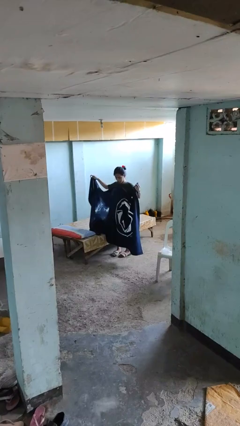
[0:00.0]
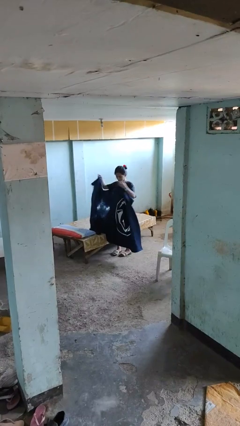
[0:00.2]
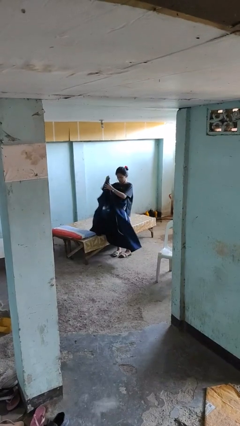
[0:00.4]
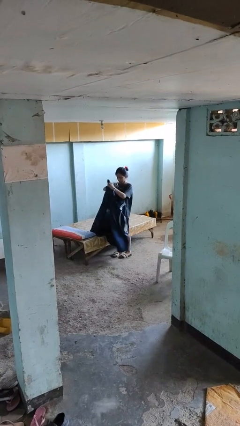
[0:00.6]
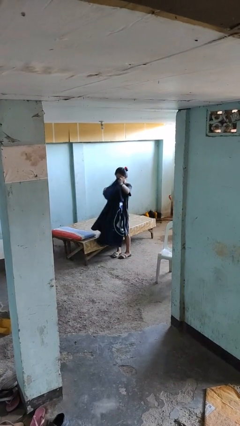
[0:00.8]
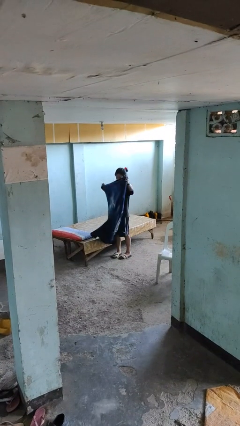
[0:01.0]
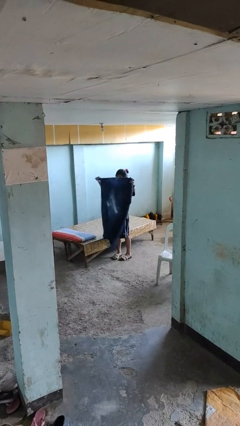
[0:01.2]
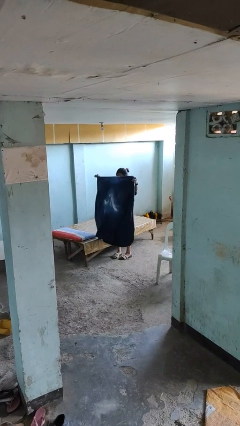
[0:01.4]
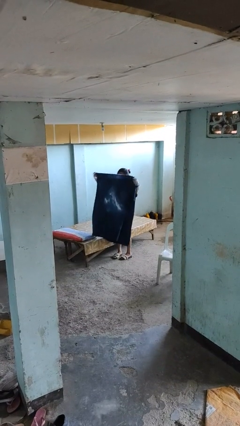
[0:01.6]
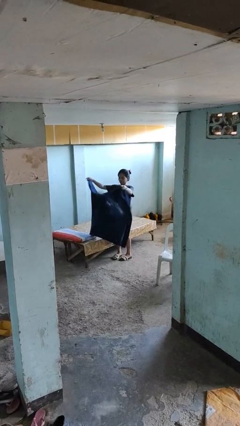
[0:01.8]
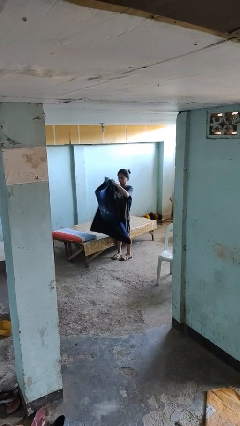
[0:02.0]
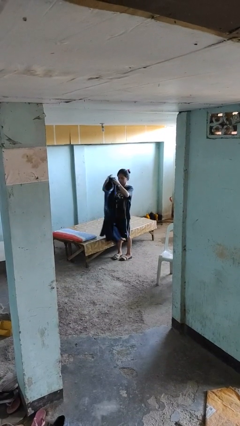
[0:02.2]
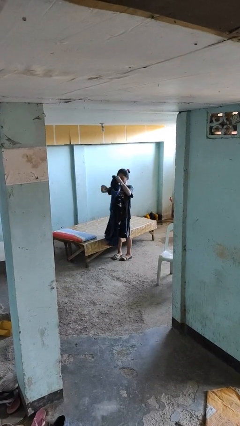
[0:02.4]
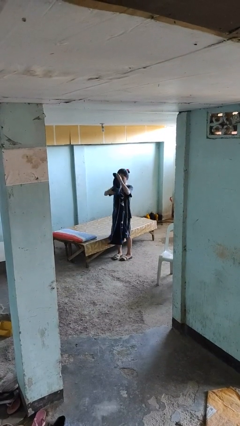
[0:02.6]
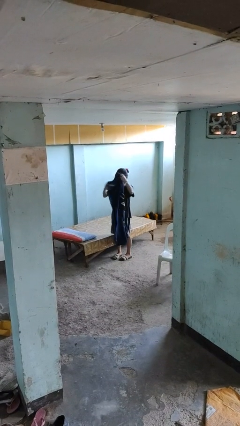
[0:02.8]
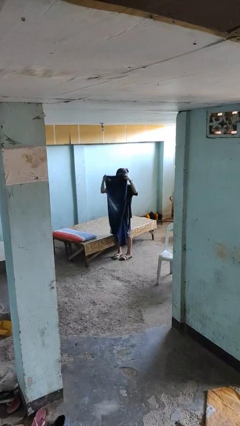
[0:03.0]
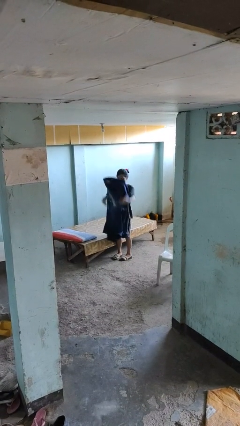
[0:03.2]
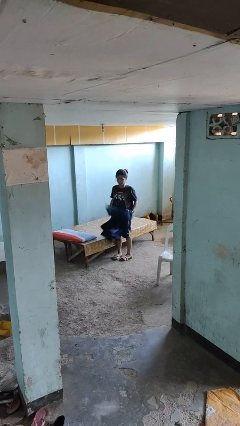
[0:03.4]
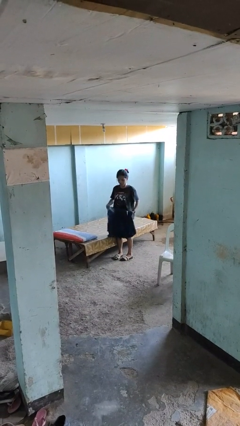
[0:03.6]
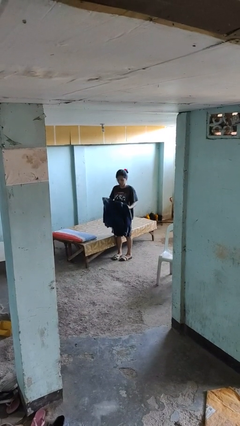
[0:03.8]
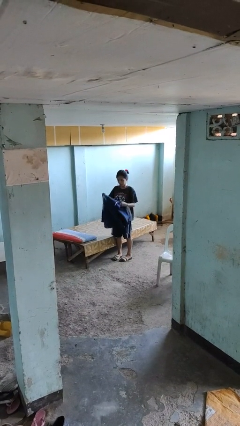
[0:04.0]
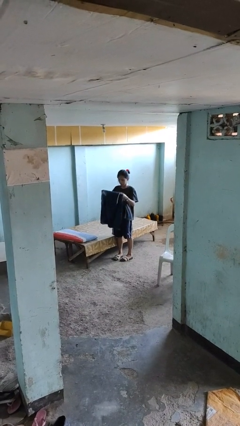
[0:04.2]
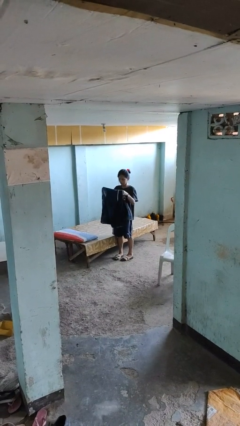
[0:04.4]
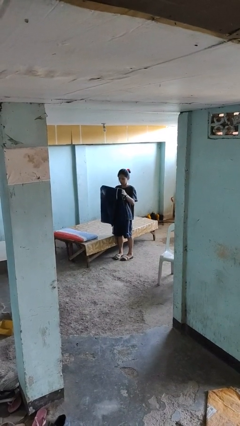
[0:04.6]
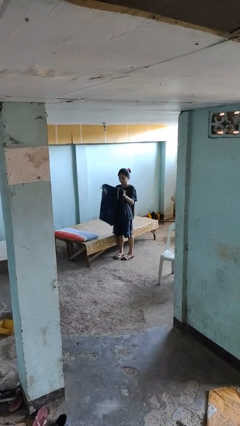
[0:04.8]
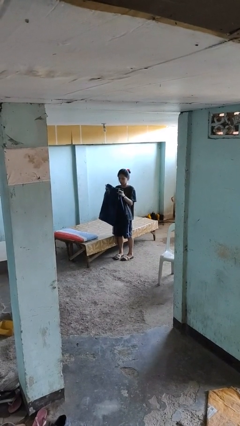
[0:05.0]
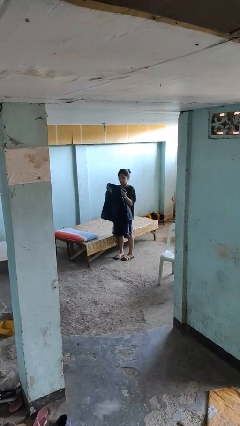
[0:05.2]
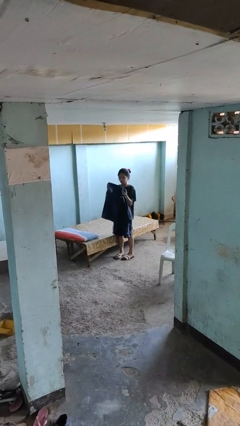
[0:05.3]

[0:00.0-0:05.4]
person folds blanket

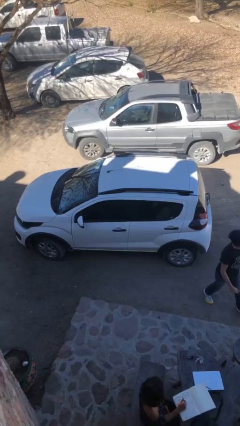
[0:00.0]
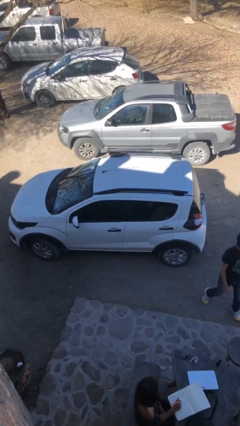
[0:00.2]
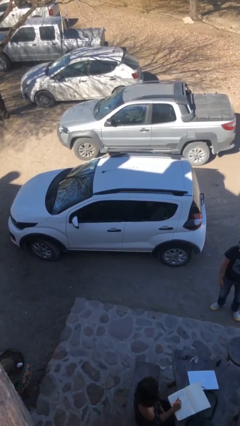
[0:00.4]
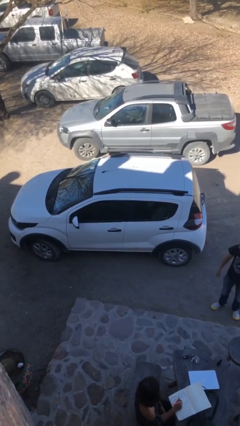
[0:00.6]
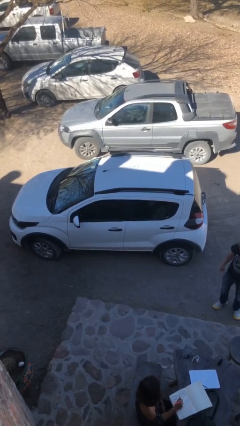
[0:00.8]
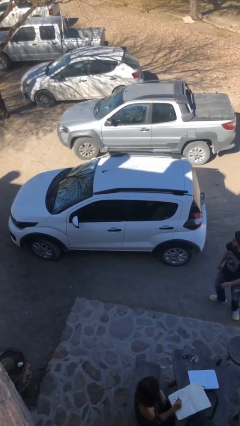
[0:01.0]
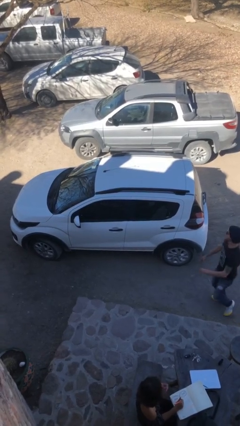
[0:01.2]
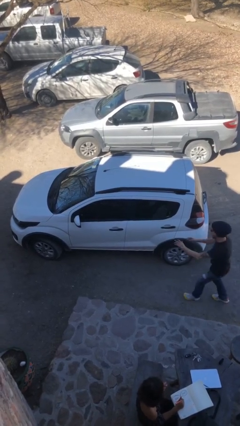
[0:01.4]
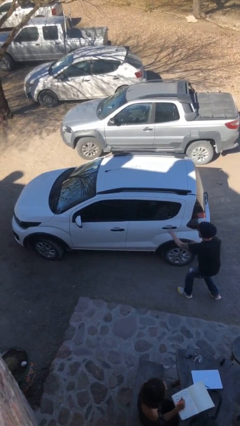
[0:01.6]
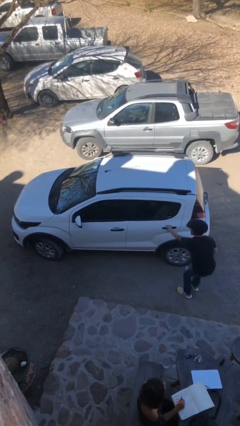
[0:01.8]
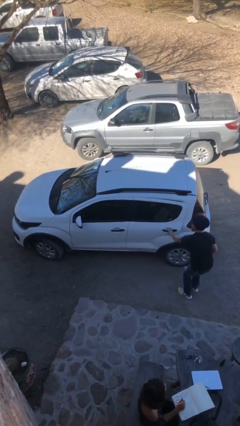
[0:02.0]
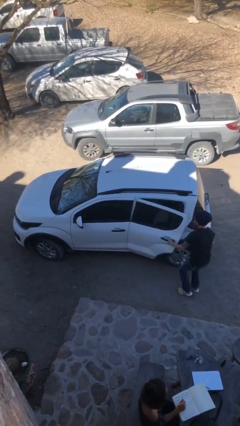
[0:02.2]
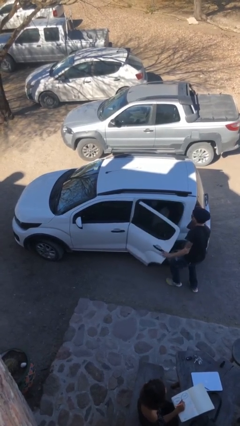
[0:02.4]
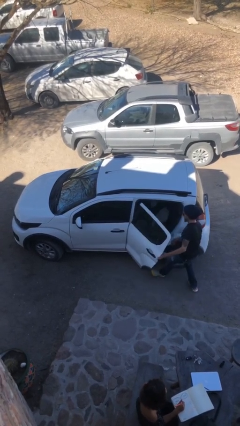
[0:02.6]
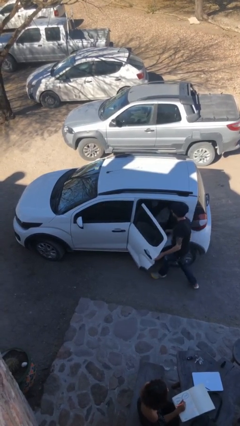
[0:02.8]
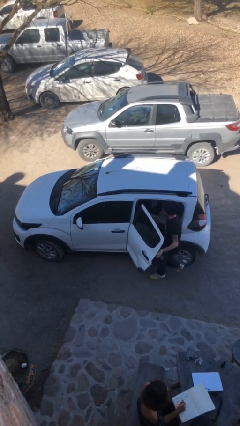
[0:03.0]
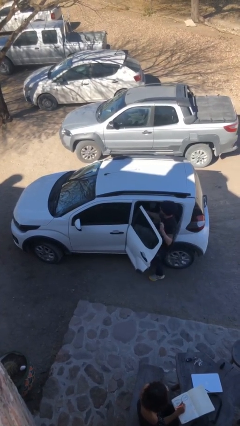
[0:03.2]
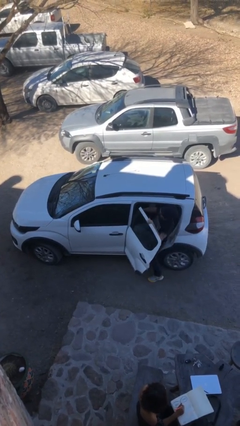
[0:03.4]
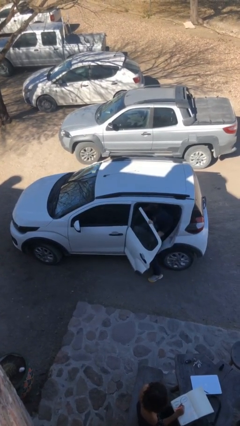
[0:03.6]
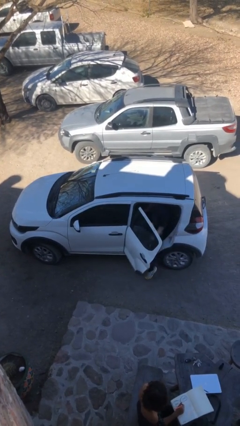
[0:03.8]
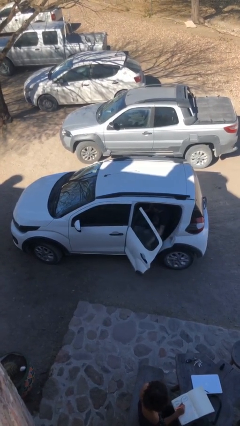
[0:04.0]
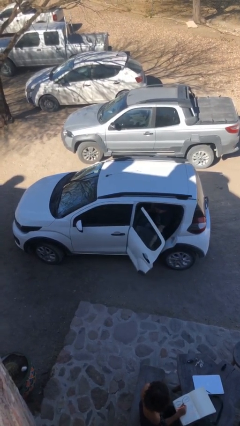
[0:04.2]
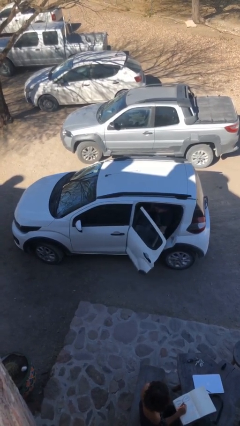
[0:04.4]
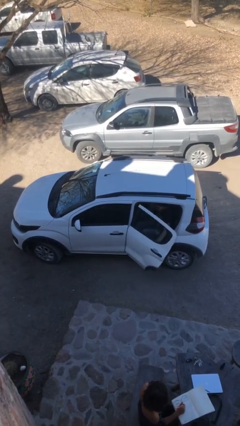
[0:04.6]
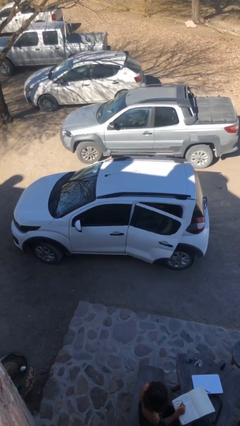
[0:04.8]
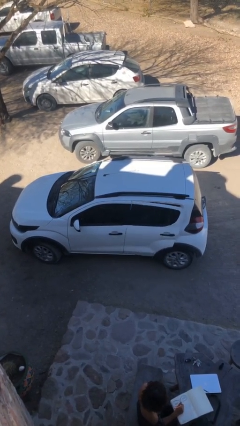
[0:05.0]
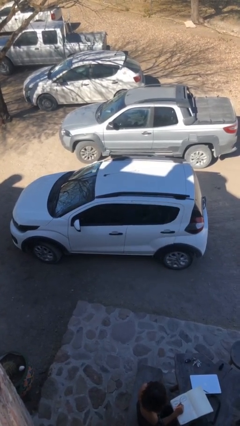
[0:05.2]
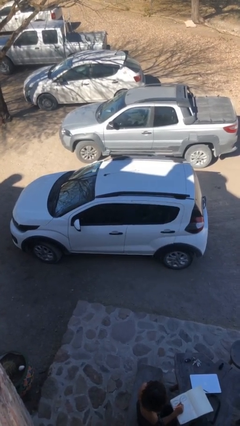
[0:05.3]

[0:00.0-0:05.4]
car picks up person

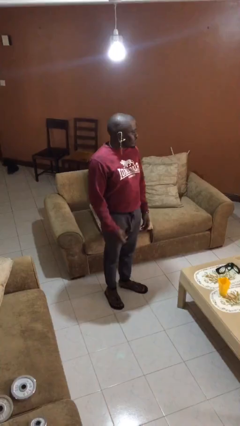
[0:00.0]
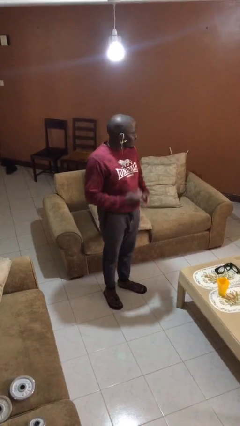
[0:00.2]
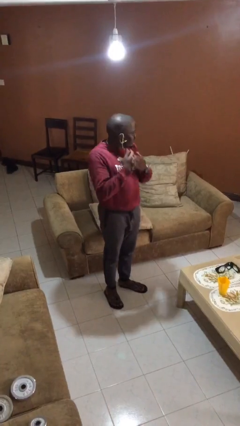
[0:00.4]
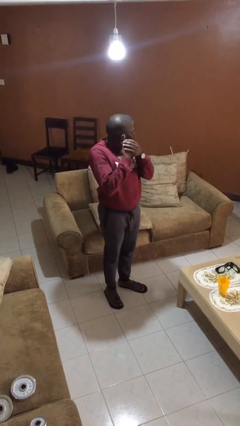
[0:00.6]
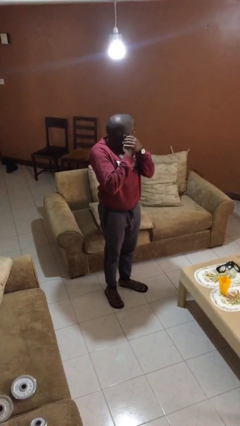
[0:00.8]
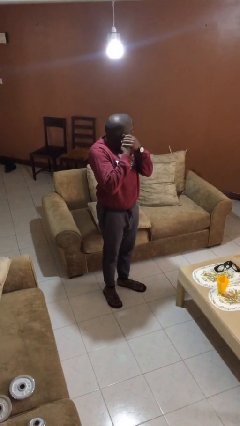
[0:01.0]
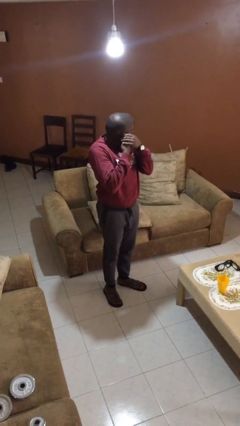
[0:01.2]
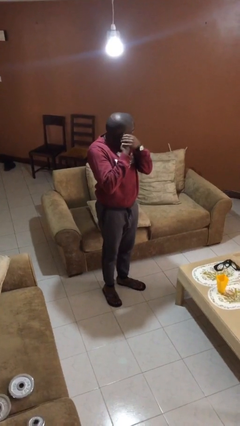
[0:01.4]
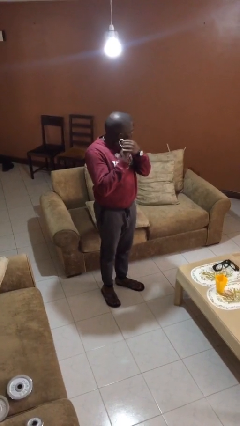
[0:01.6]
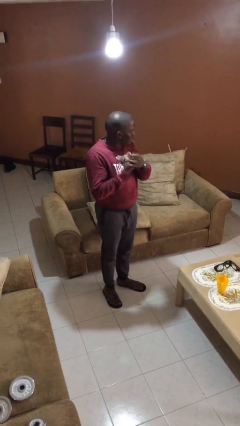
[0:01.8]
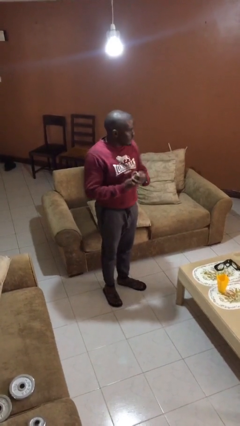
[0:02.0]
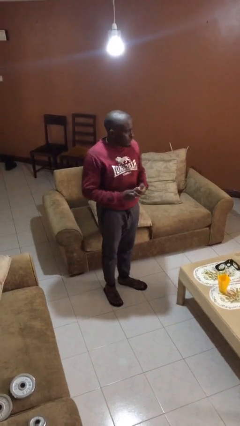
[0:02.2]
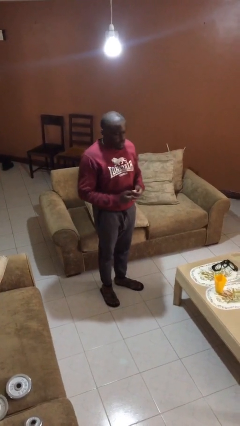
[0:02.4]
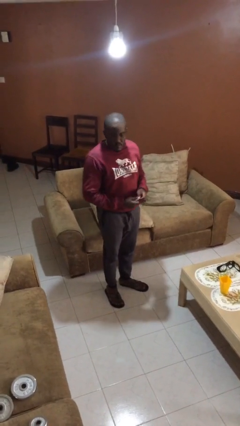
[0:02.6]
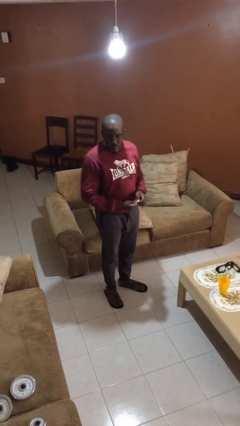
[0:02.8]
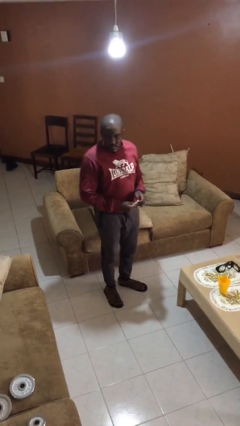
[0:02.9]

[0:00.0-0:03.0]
person takes off earrings

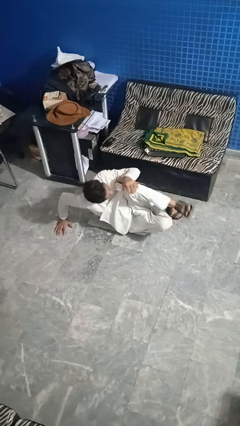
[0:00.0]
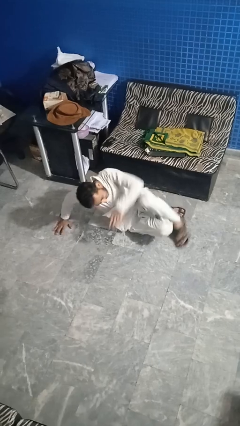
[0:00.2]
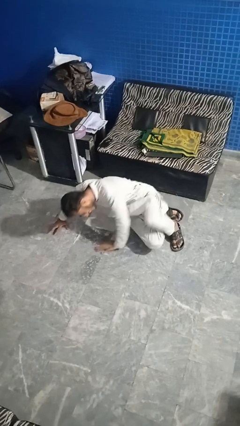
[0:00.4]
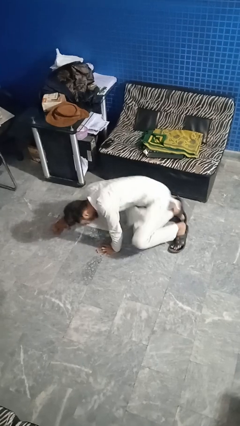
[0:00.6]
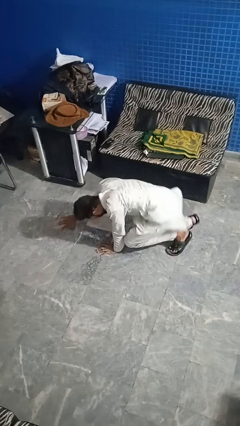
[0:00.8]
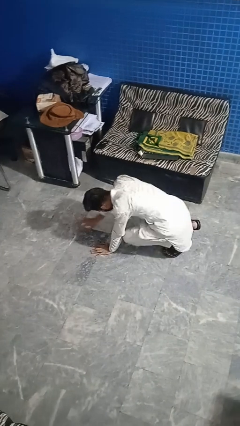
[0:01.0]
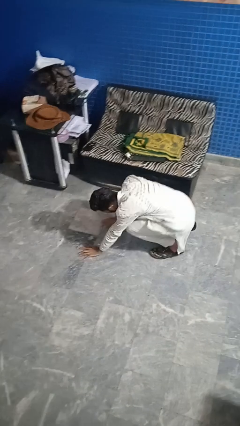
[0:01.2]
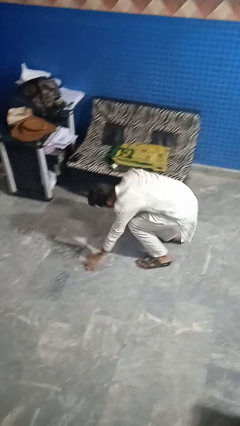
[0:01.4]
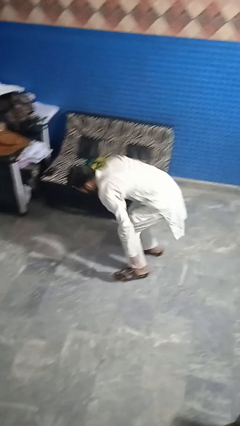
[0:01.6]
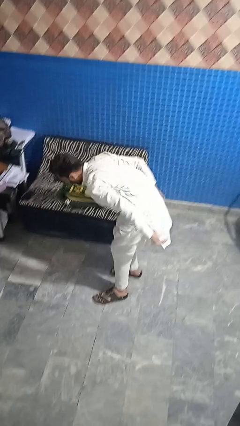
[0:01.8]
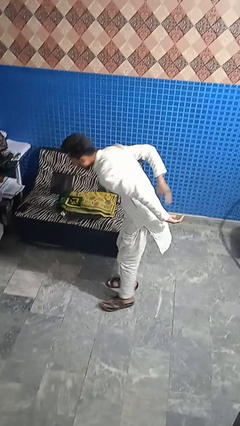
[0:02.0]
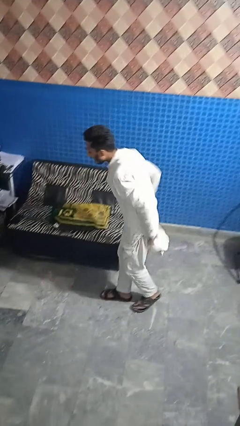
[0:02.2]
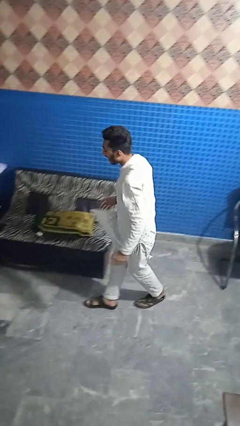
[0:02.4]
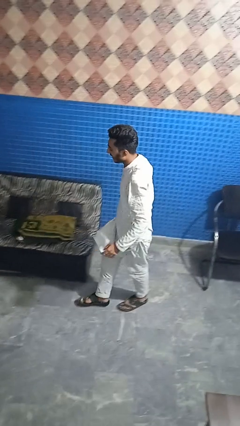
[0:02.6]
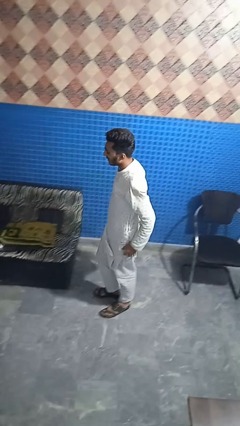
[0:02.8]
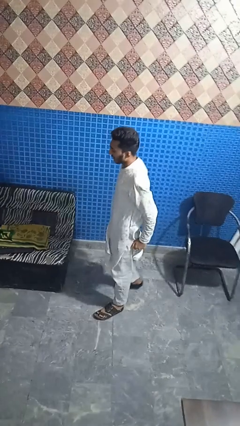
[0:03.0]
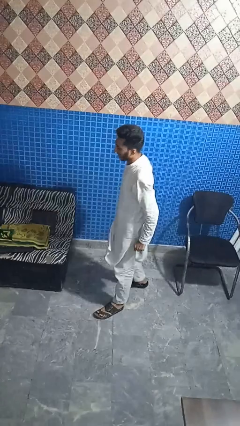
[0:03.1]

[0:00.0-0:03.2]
person stands up from floor

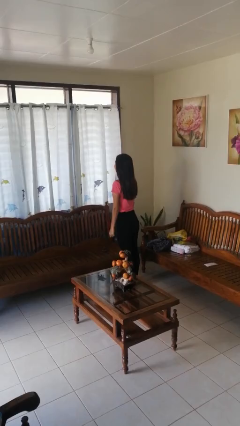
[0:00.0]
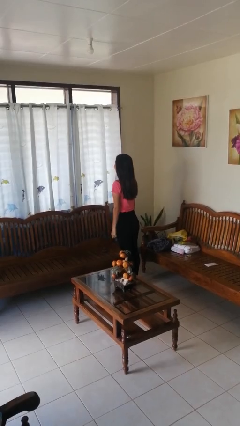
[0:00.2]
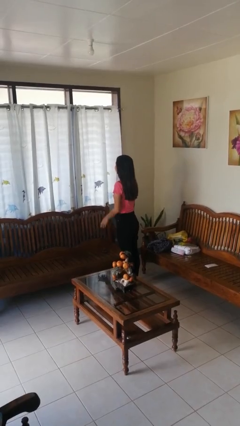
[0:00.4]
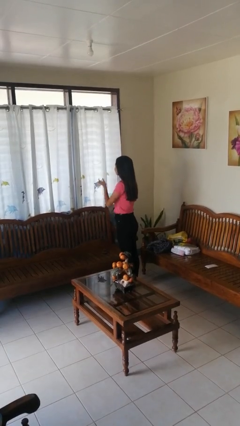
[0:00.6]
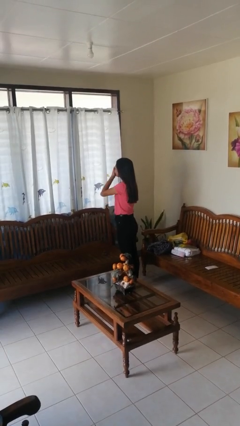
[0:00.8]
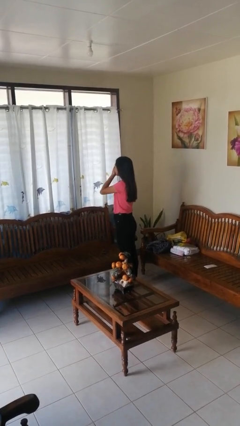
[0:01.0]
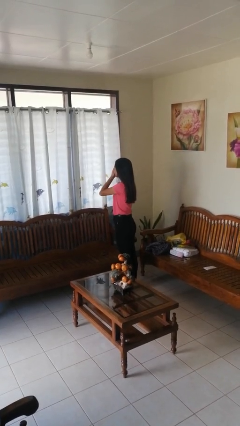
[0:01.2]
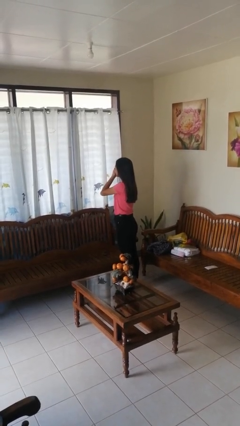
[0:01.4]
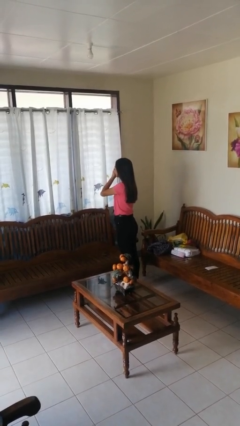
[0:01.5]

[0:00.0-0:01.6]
person yawns
